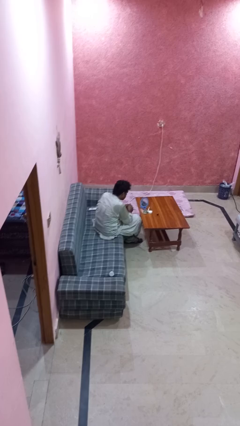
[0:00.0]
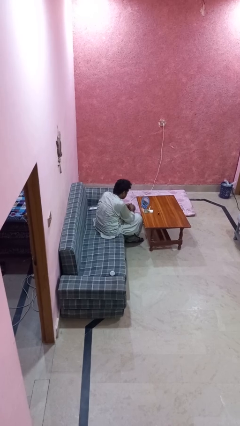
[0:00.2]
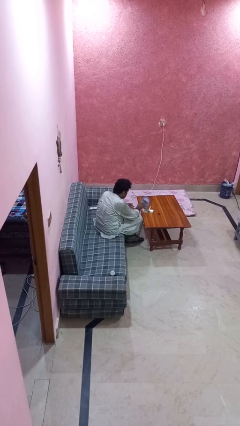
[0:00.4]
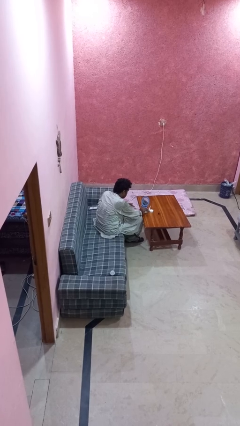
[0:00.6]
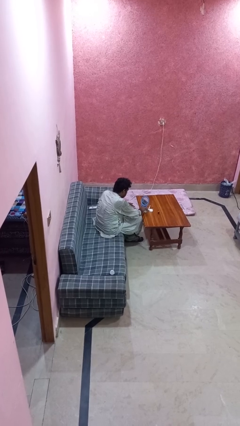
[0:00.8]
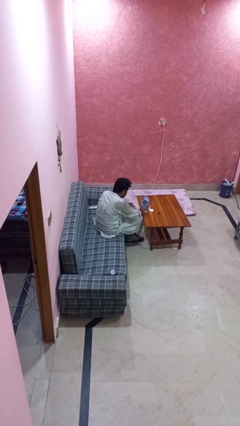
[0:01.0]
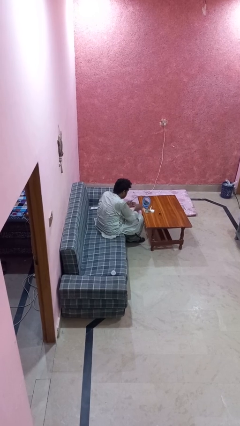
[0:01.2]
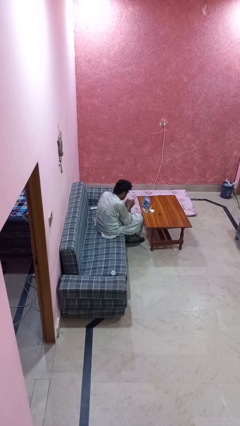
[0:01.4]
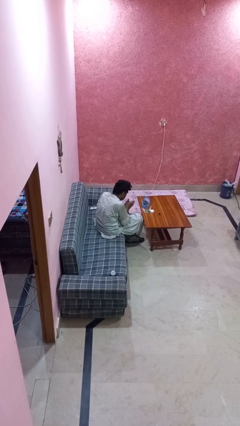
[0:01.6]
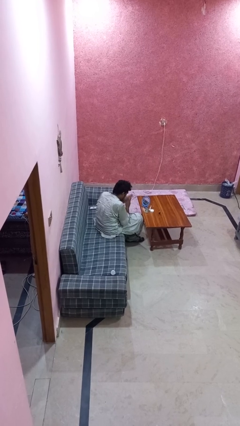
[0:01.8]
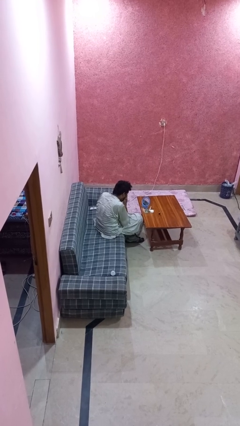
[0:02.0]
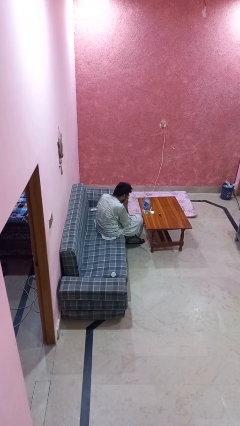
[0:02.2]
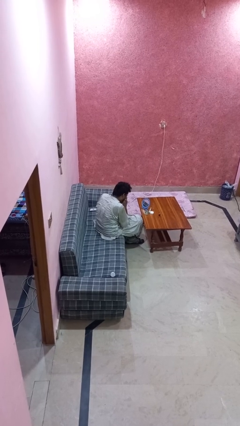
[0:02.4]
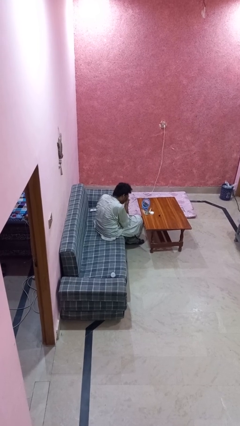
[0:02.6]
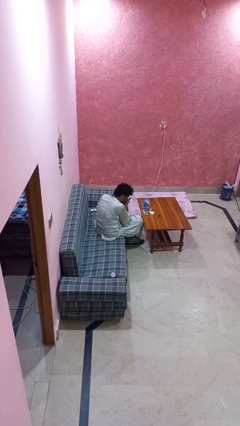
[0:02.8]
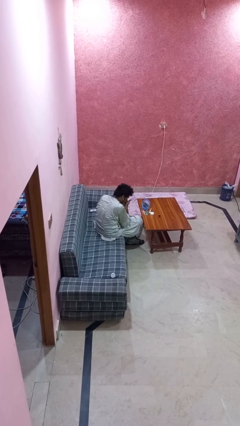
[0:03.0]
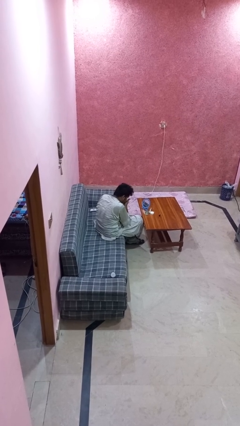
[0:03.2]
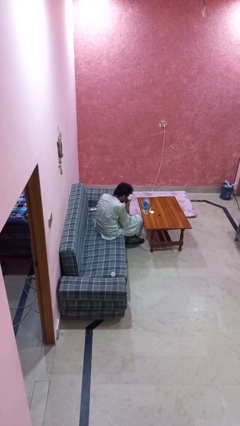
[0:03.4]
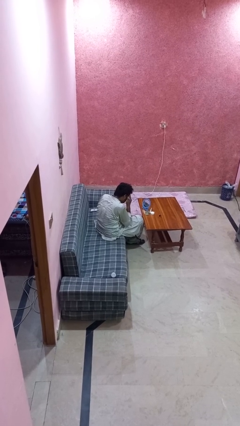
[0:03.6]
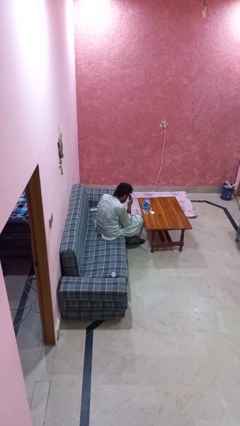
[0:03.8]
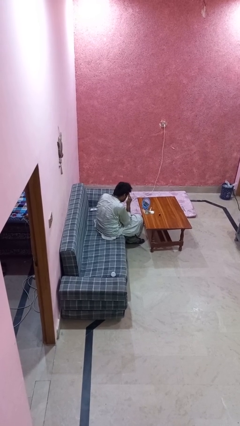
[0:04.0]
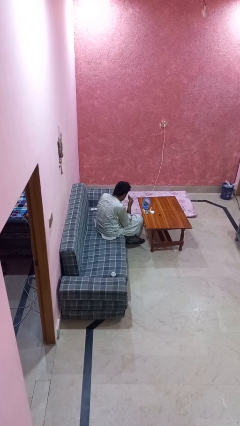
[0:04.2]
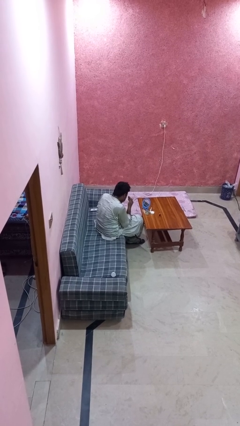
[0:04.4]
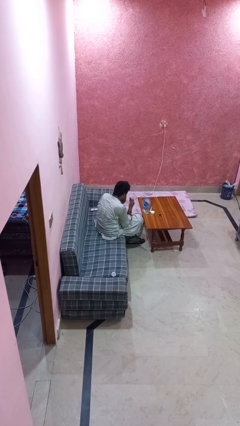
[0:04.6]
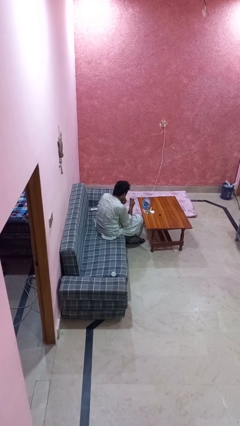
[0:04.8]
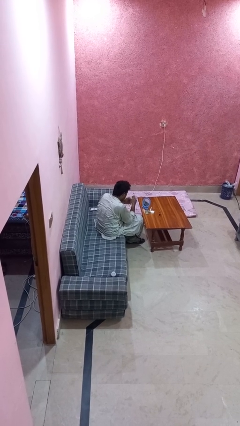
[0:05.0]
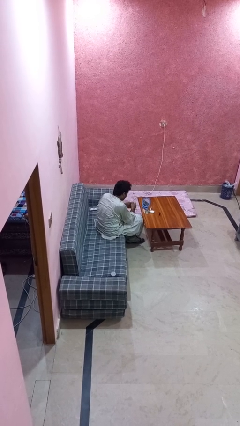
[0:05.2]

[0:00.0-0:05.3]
person applies foundation makeup

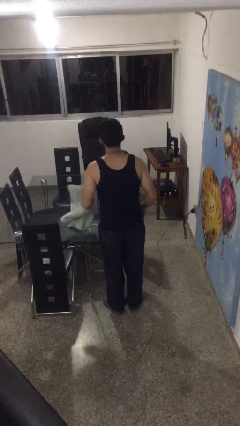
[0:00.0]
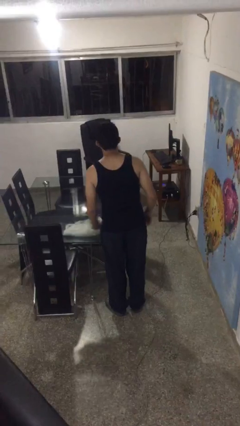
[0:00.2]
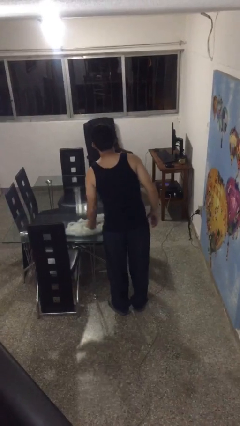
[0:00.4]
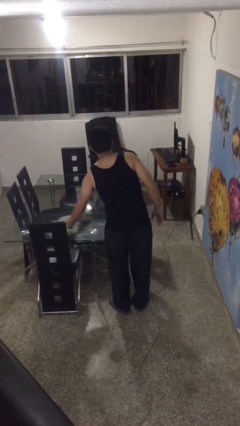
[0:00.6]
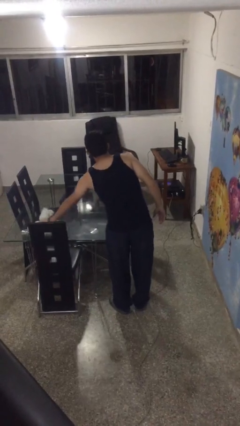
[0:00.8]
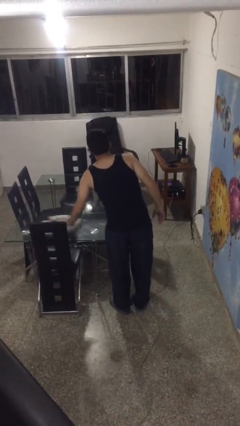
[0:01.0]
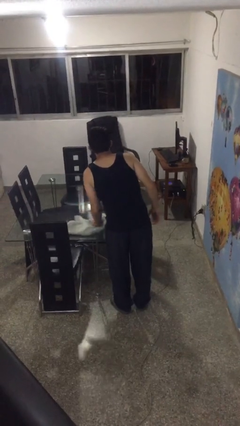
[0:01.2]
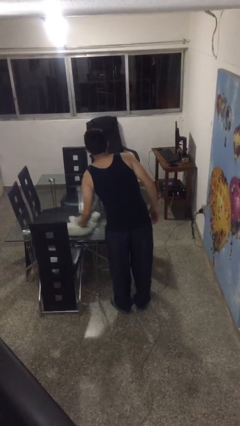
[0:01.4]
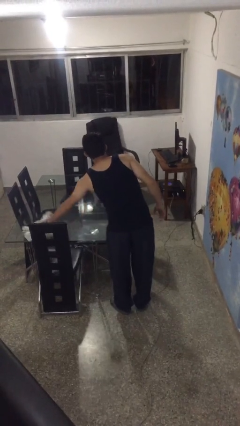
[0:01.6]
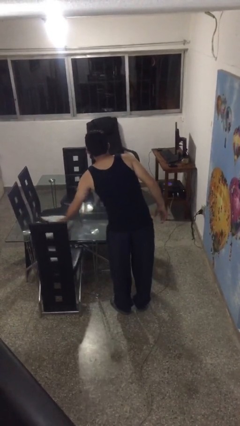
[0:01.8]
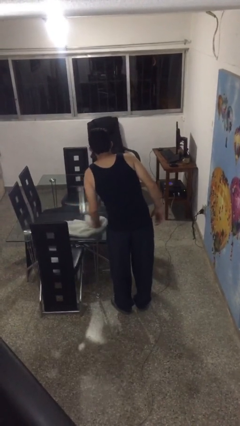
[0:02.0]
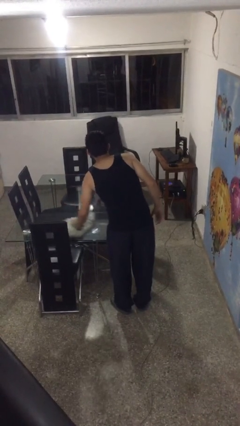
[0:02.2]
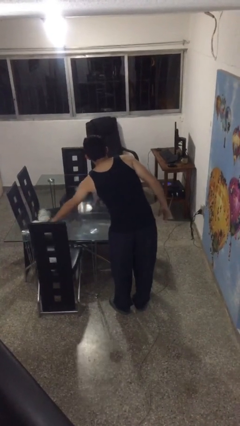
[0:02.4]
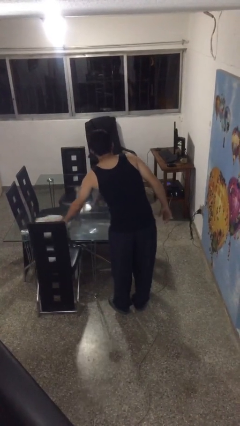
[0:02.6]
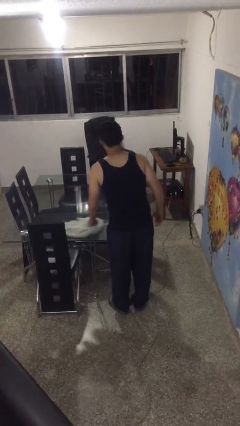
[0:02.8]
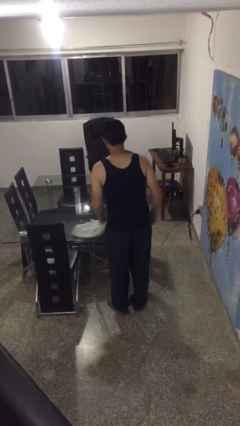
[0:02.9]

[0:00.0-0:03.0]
person cleans table with rag

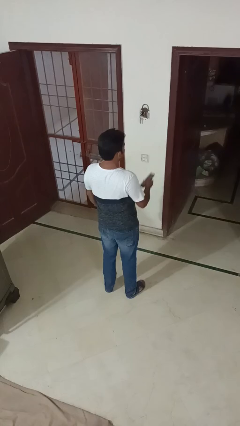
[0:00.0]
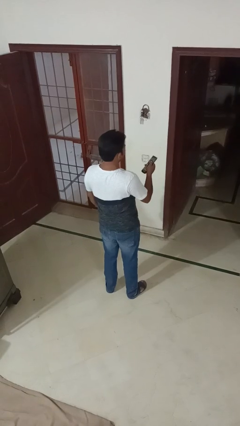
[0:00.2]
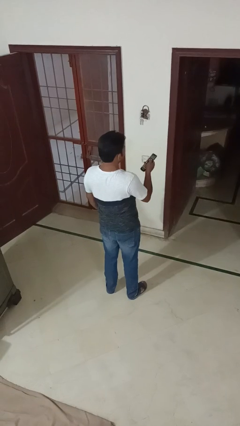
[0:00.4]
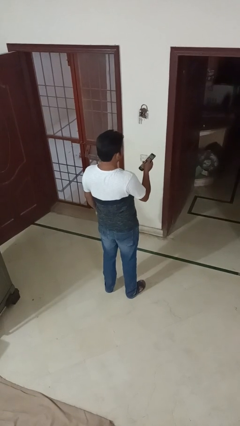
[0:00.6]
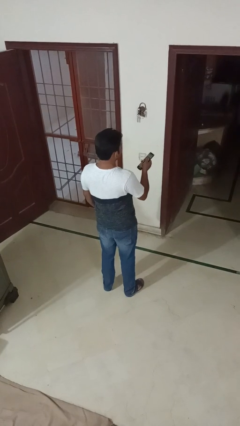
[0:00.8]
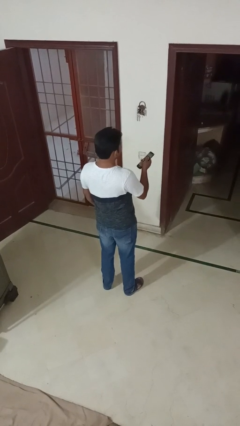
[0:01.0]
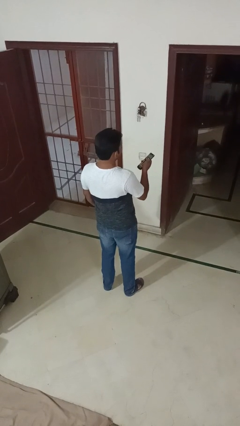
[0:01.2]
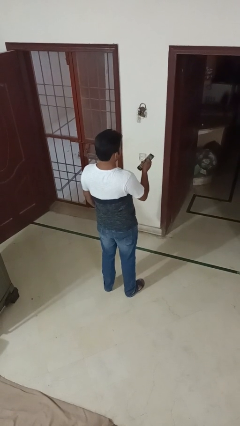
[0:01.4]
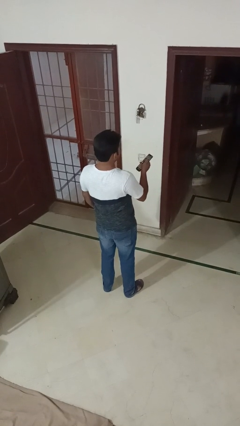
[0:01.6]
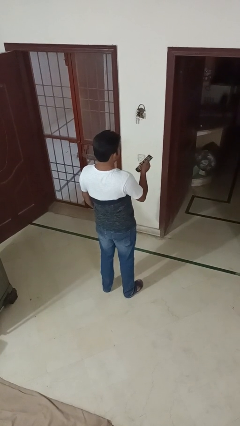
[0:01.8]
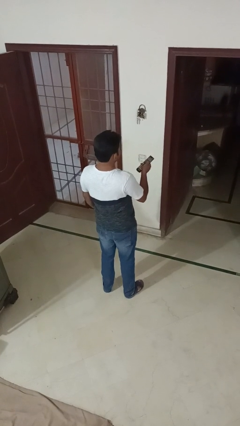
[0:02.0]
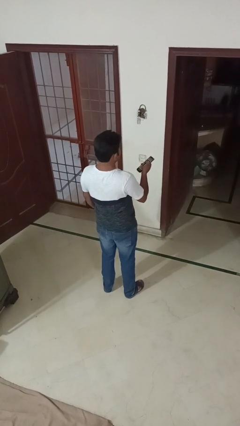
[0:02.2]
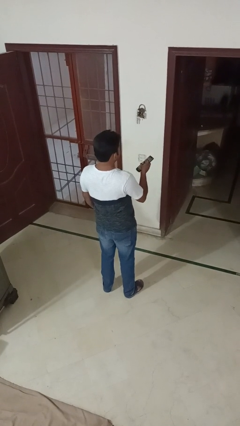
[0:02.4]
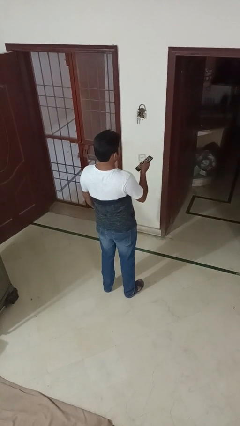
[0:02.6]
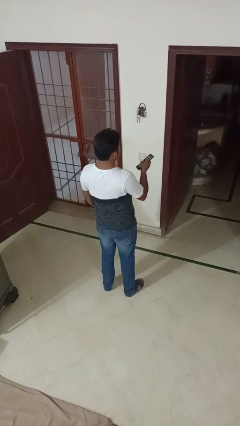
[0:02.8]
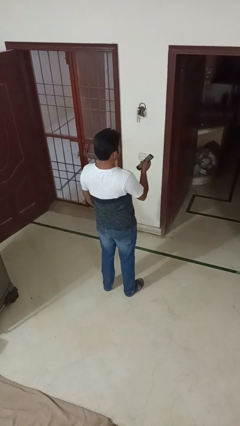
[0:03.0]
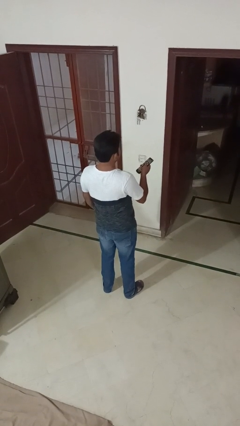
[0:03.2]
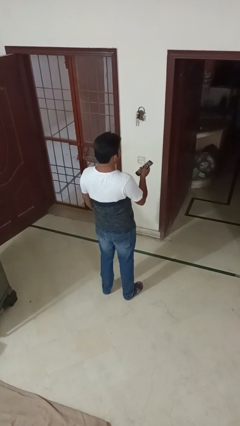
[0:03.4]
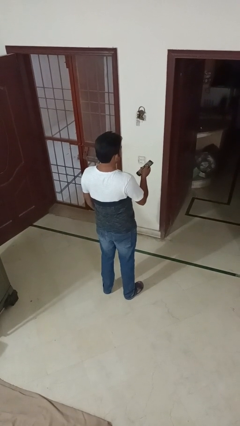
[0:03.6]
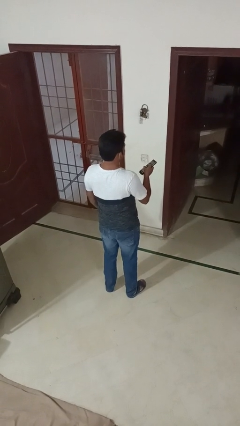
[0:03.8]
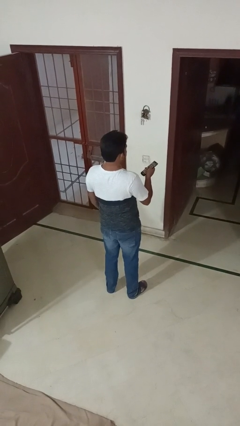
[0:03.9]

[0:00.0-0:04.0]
person uses television remote

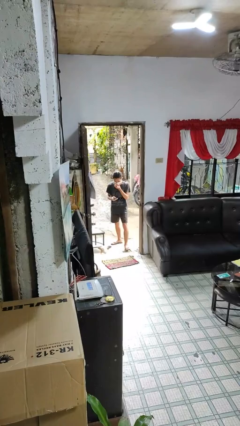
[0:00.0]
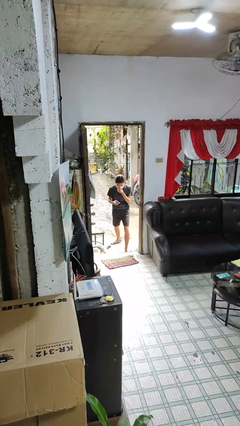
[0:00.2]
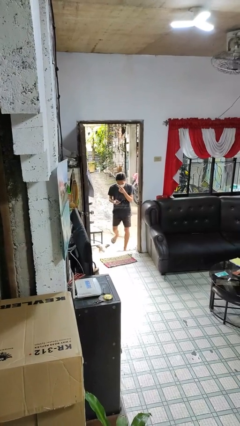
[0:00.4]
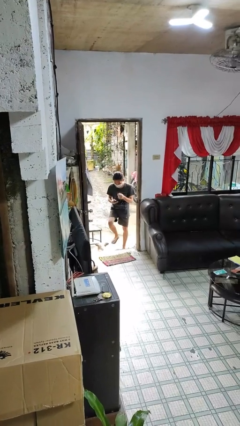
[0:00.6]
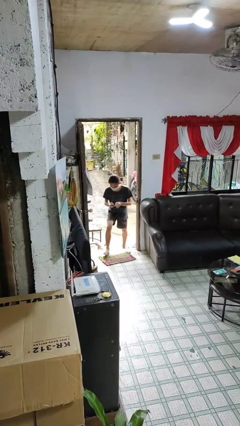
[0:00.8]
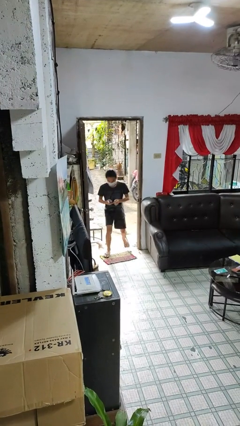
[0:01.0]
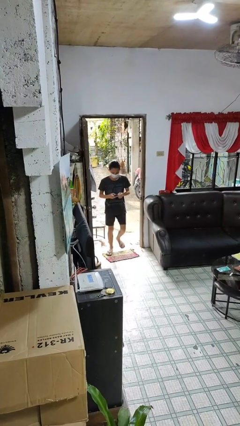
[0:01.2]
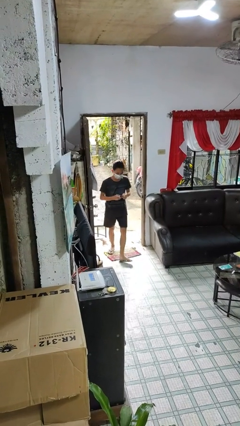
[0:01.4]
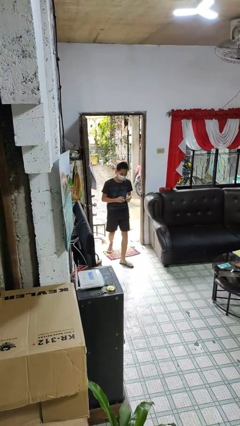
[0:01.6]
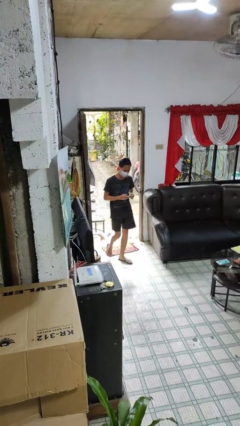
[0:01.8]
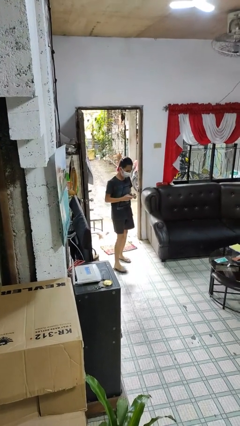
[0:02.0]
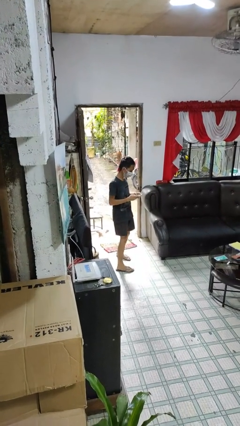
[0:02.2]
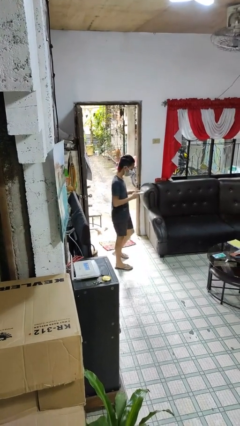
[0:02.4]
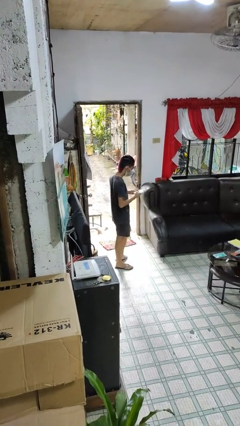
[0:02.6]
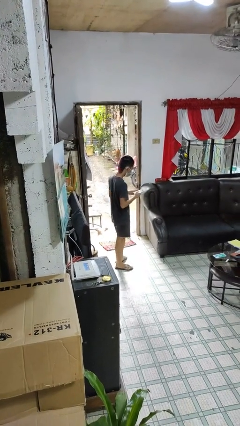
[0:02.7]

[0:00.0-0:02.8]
person enters scene through structure

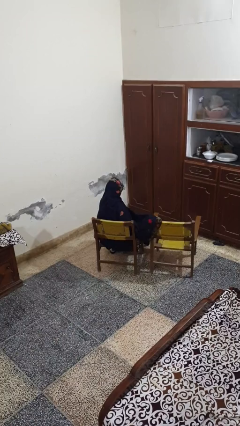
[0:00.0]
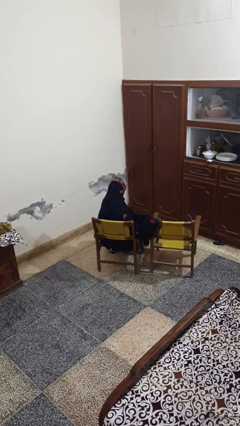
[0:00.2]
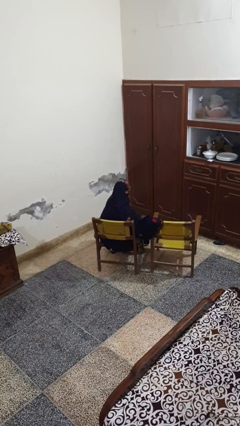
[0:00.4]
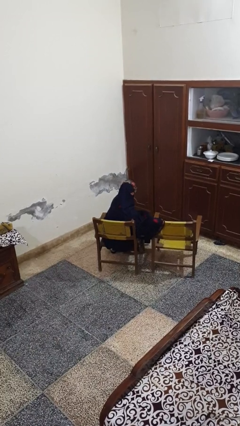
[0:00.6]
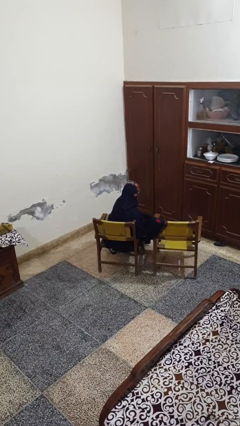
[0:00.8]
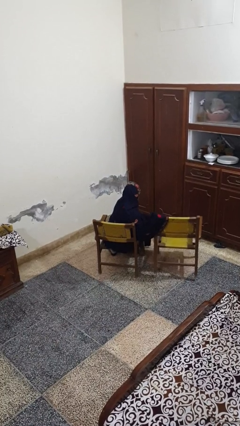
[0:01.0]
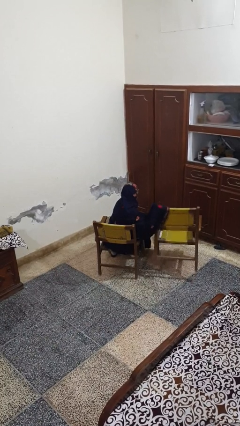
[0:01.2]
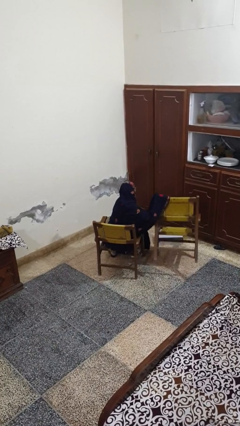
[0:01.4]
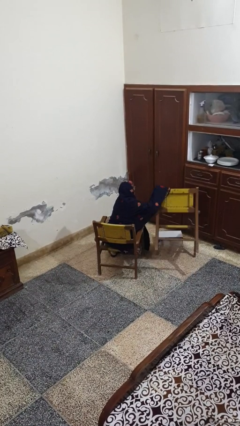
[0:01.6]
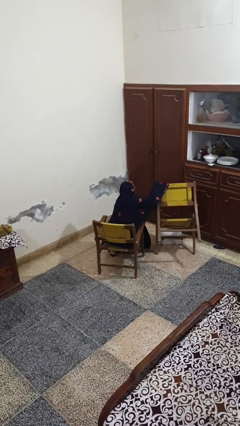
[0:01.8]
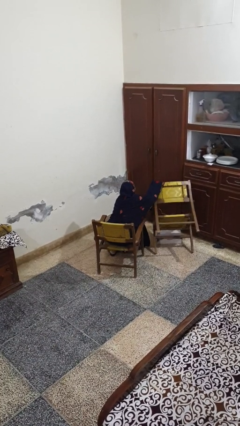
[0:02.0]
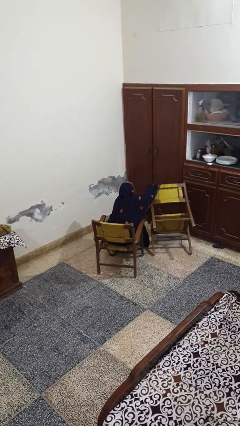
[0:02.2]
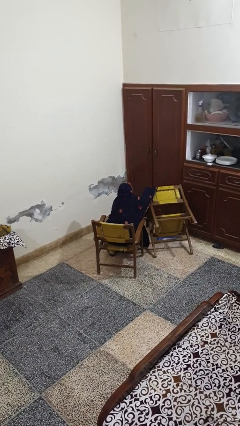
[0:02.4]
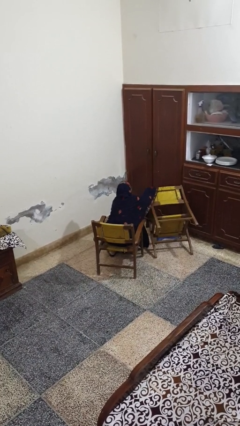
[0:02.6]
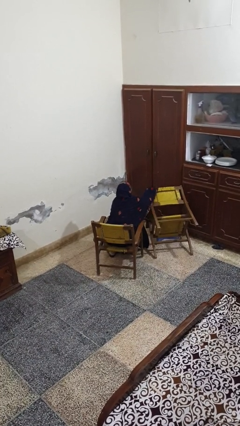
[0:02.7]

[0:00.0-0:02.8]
person knocks over furniture
